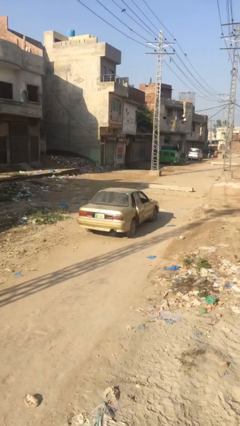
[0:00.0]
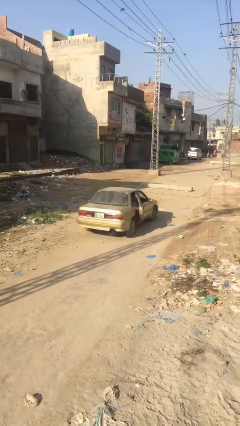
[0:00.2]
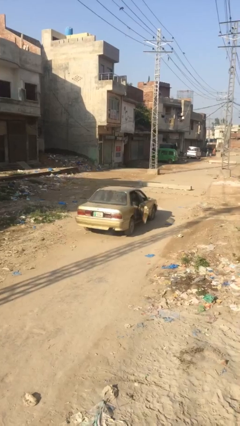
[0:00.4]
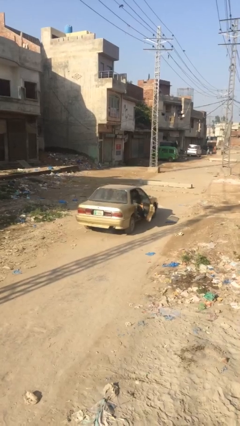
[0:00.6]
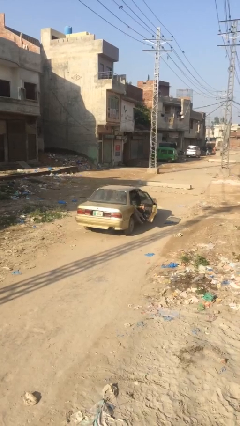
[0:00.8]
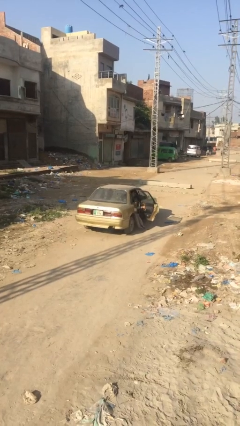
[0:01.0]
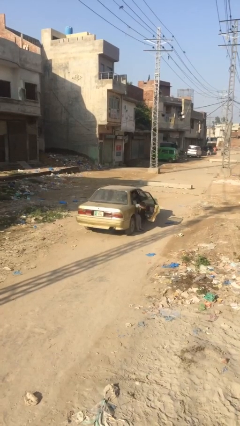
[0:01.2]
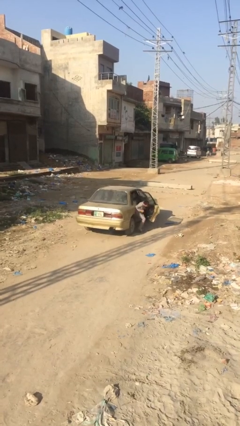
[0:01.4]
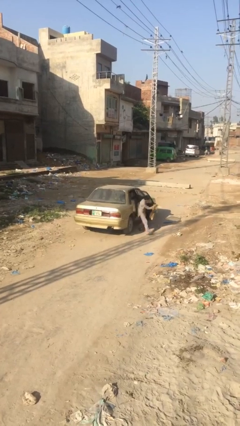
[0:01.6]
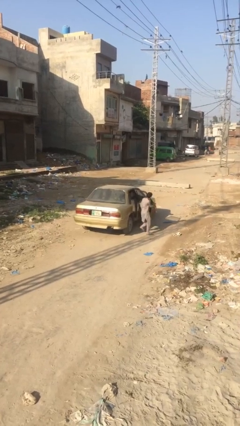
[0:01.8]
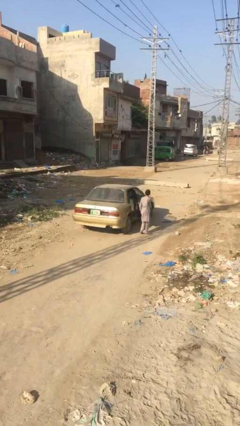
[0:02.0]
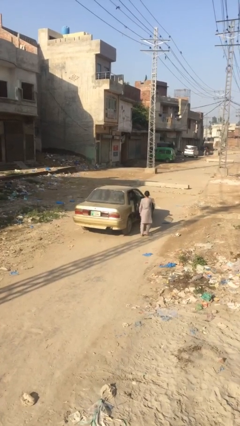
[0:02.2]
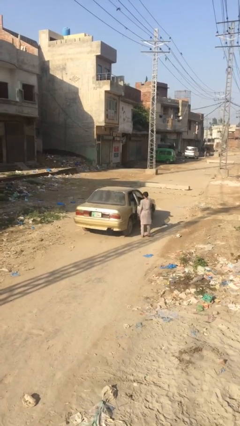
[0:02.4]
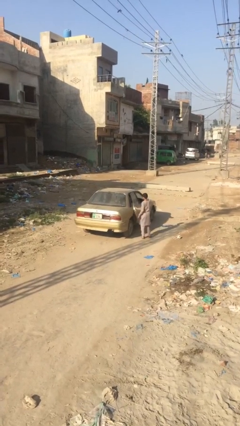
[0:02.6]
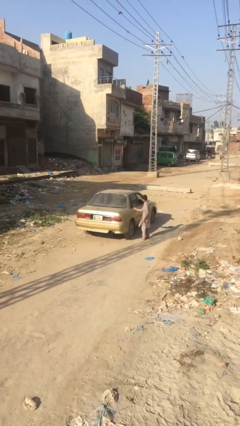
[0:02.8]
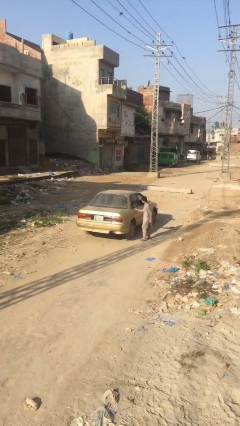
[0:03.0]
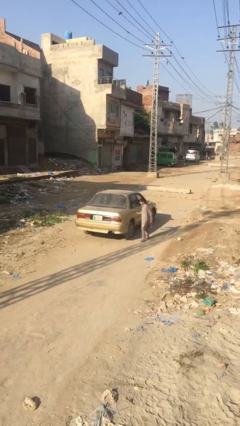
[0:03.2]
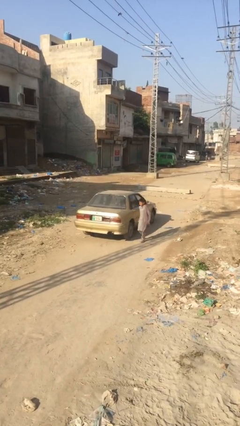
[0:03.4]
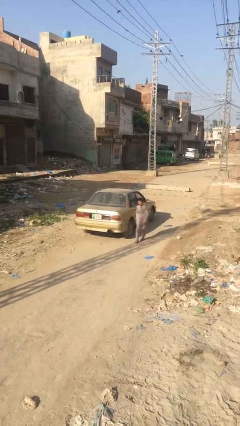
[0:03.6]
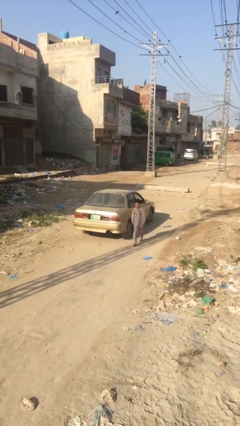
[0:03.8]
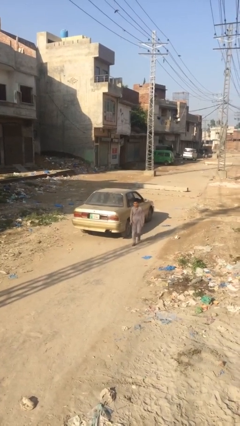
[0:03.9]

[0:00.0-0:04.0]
car drops off person

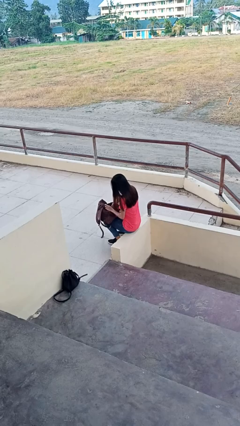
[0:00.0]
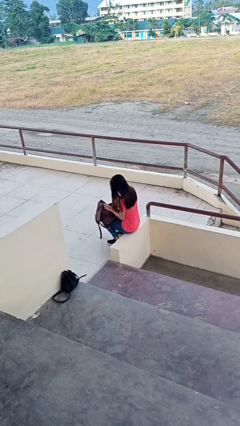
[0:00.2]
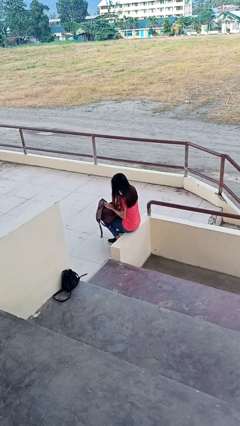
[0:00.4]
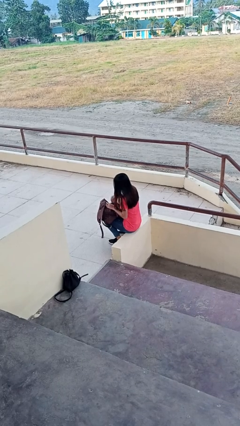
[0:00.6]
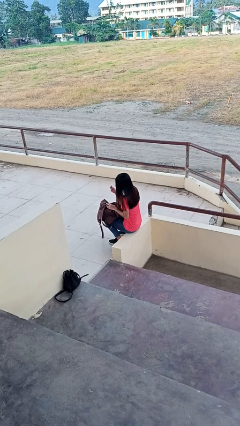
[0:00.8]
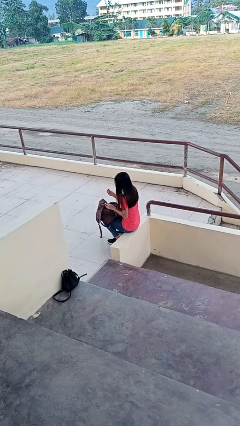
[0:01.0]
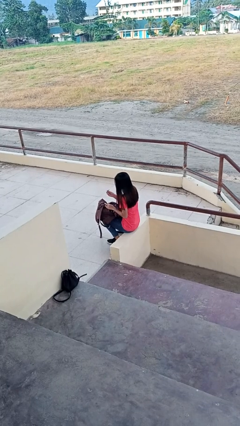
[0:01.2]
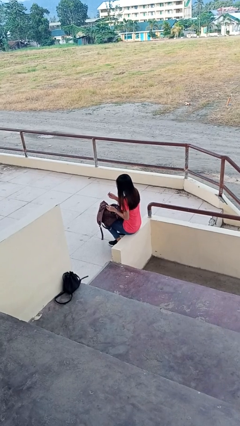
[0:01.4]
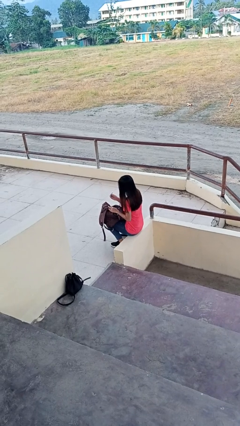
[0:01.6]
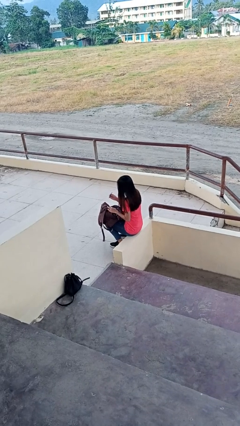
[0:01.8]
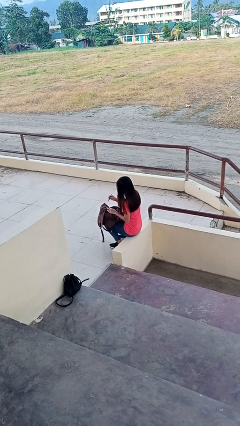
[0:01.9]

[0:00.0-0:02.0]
person takes object from backpack

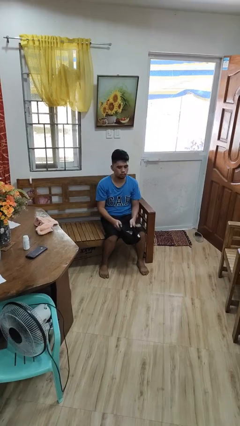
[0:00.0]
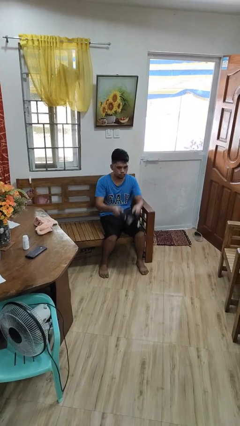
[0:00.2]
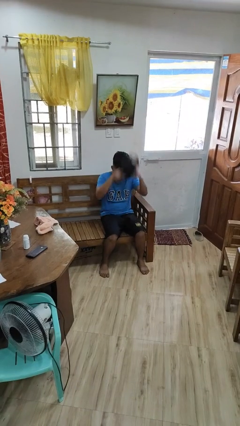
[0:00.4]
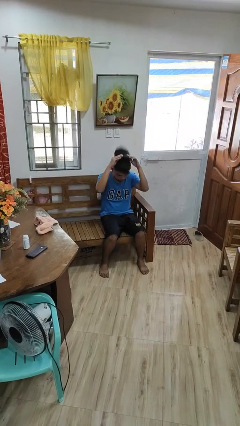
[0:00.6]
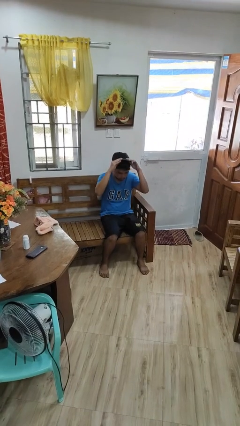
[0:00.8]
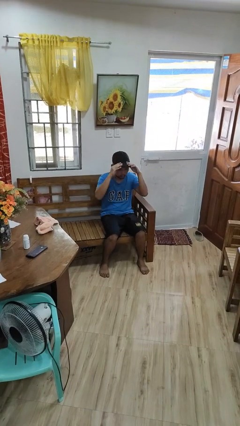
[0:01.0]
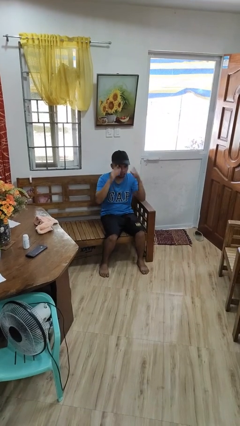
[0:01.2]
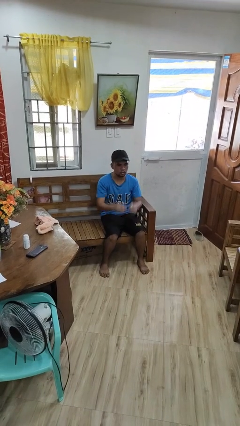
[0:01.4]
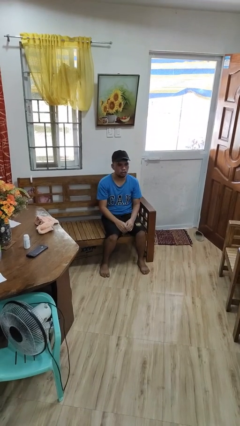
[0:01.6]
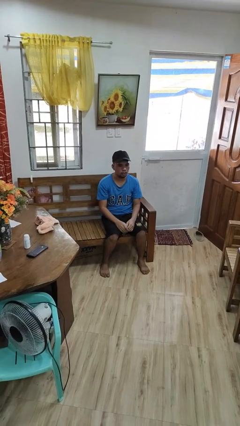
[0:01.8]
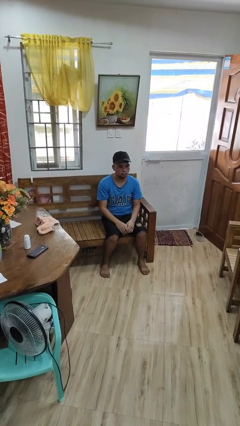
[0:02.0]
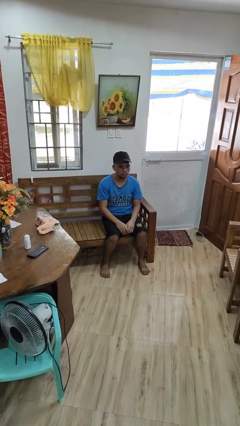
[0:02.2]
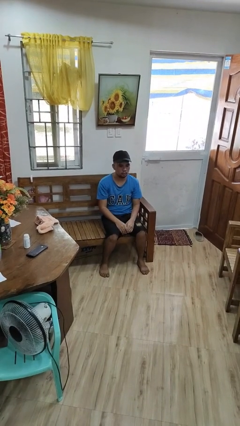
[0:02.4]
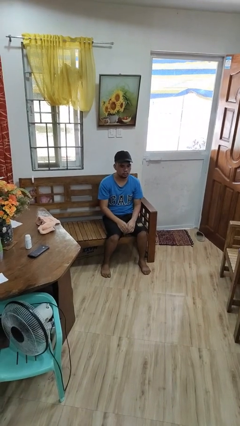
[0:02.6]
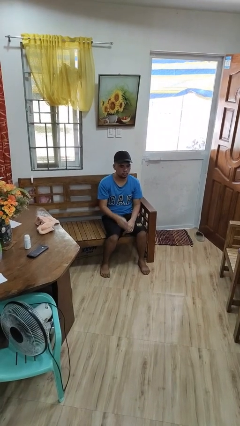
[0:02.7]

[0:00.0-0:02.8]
person puts on hat

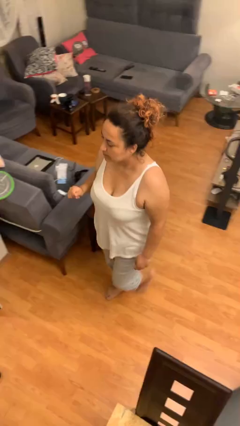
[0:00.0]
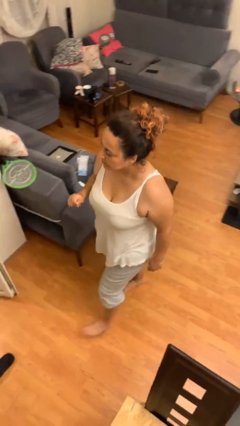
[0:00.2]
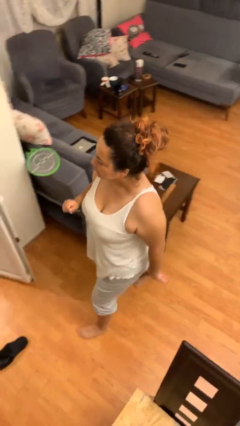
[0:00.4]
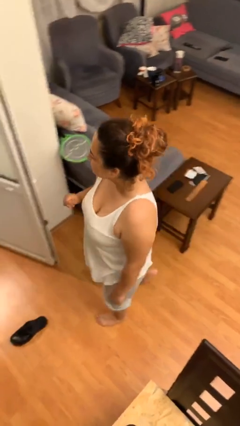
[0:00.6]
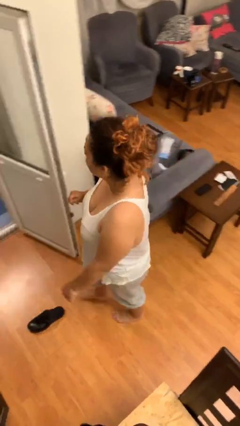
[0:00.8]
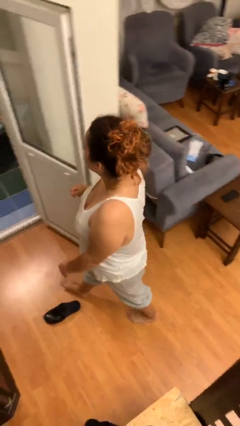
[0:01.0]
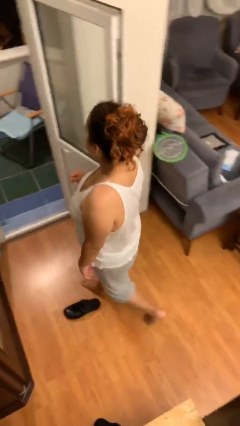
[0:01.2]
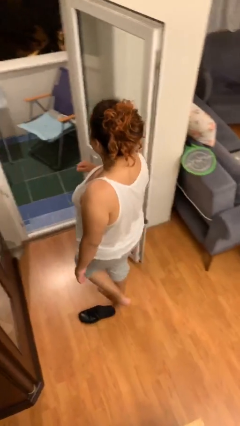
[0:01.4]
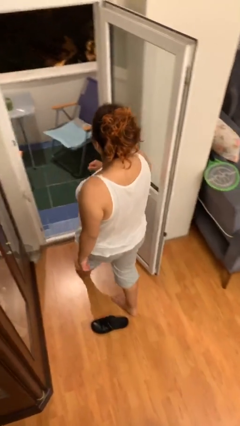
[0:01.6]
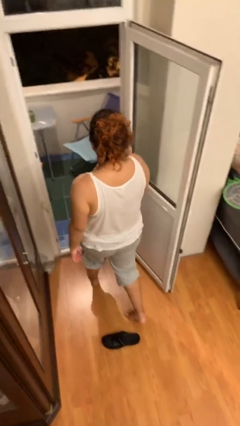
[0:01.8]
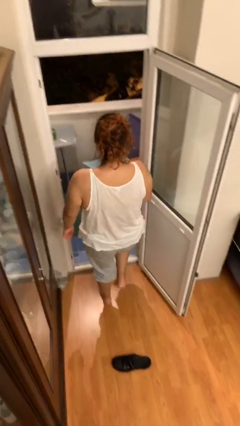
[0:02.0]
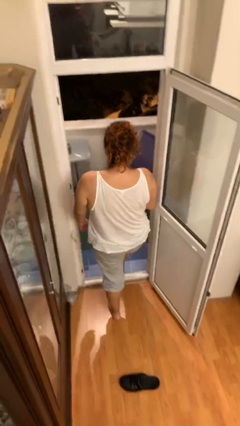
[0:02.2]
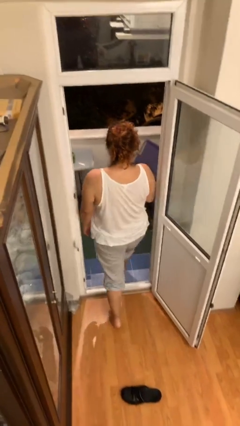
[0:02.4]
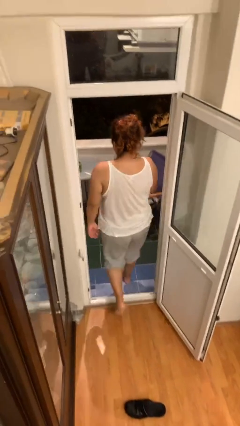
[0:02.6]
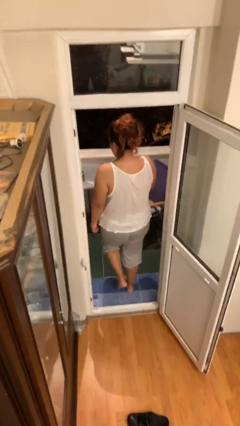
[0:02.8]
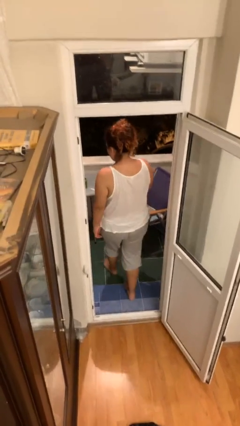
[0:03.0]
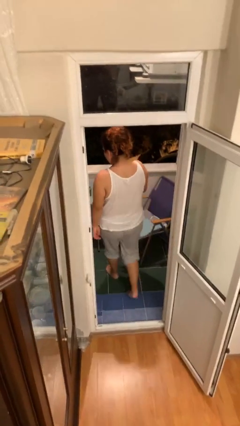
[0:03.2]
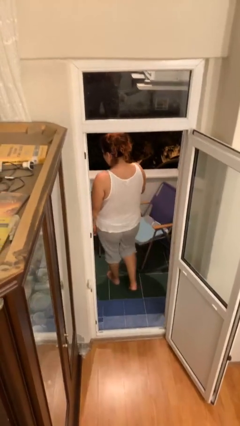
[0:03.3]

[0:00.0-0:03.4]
person exits scene through structure

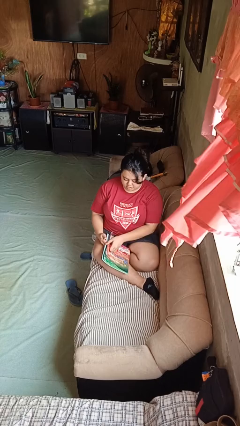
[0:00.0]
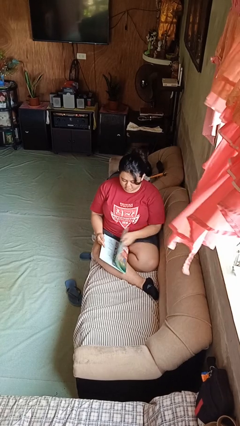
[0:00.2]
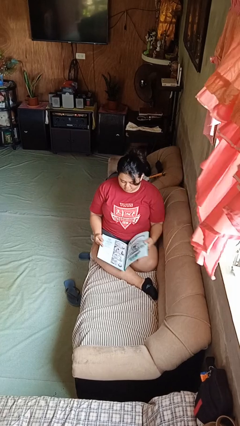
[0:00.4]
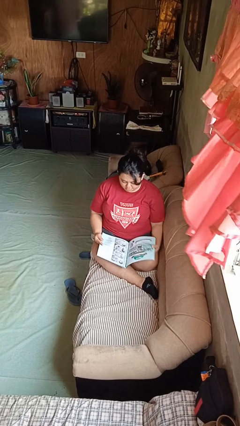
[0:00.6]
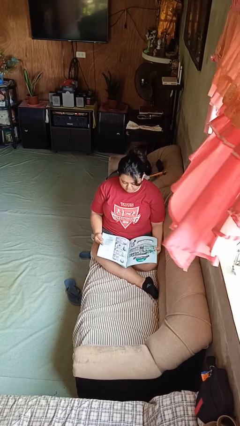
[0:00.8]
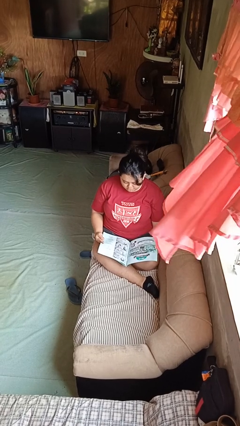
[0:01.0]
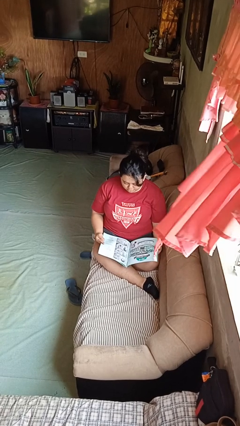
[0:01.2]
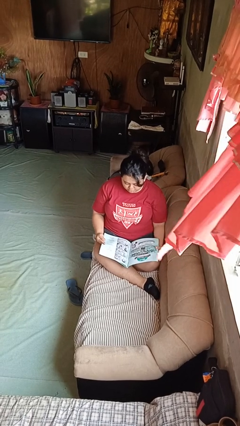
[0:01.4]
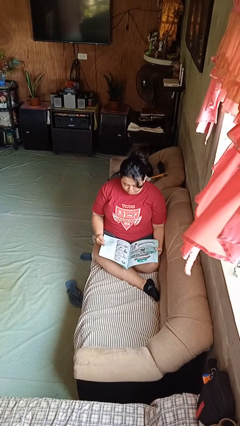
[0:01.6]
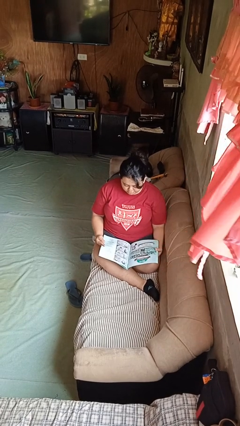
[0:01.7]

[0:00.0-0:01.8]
person reads magazine

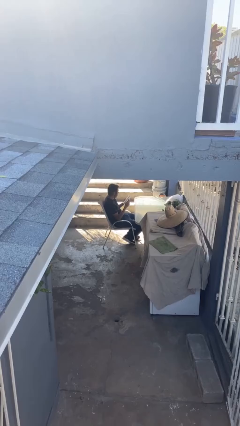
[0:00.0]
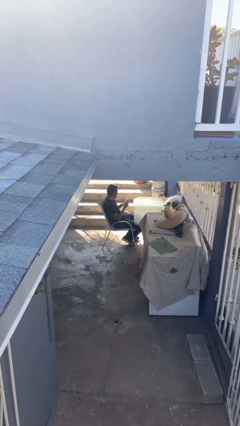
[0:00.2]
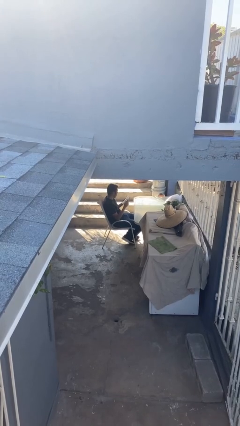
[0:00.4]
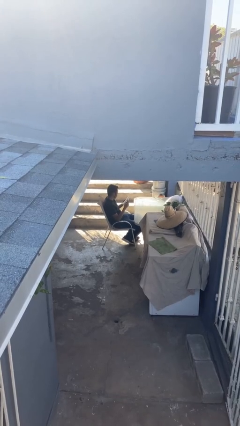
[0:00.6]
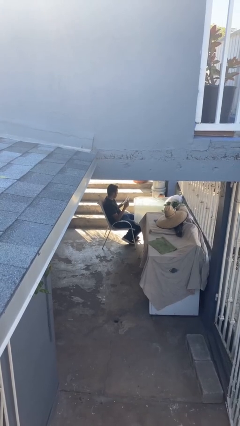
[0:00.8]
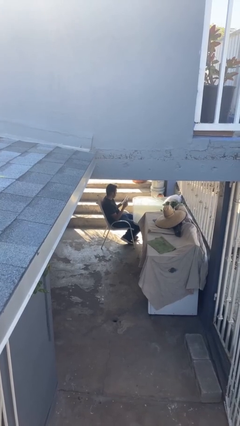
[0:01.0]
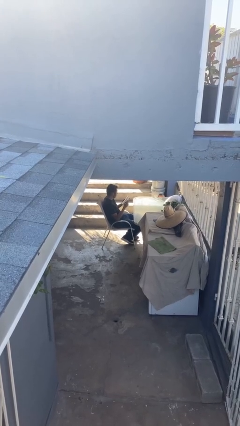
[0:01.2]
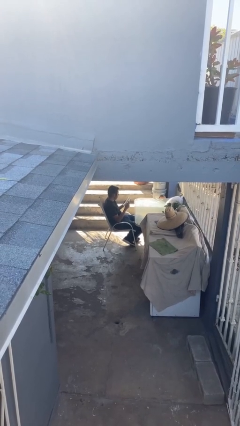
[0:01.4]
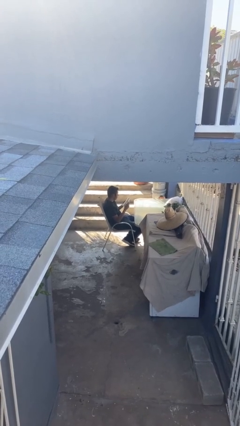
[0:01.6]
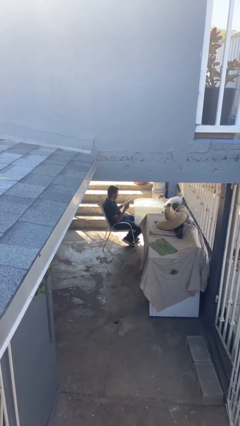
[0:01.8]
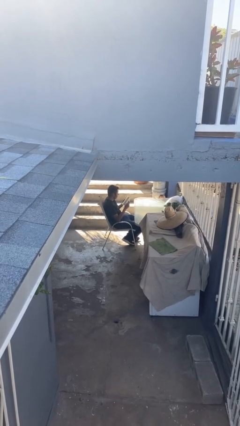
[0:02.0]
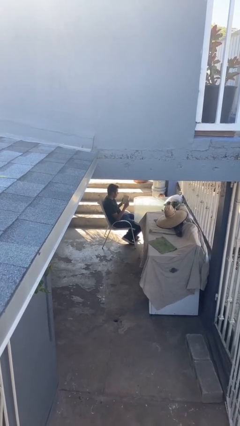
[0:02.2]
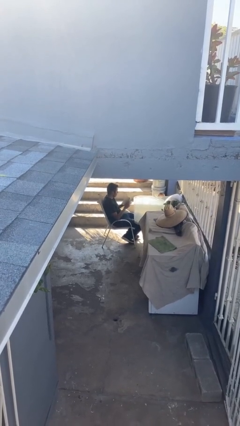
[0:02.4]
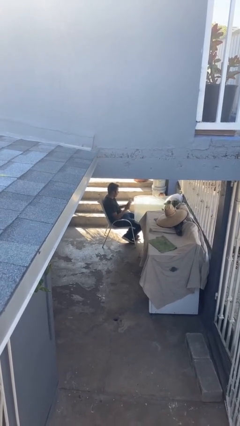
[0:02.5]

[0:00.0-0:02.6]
person reads document

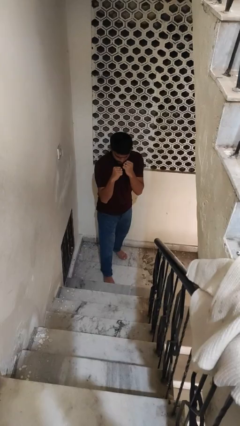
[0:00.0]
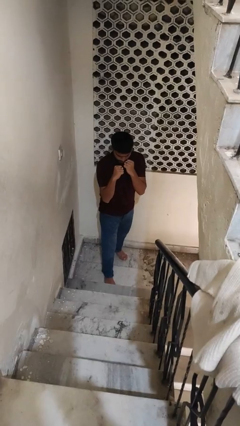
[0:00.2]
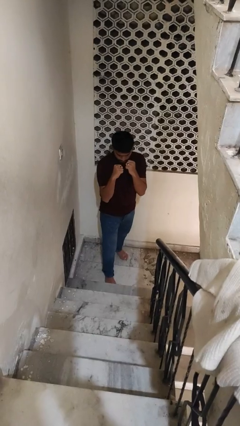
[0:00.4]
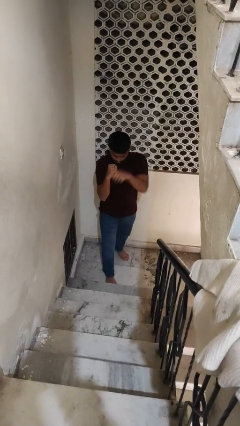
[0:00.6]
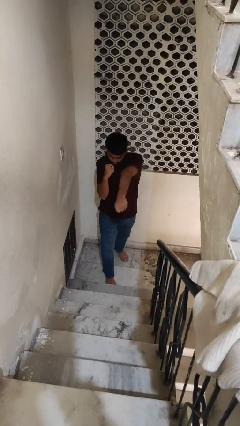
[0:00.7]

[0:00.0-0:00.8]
person punches
